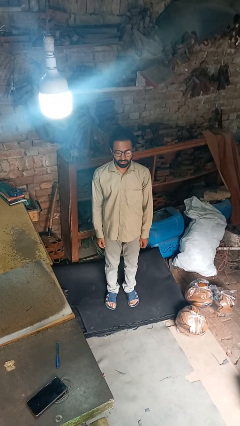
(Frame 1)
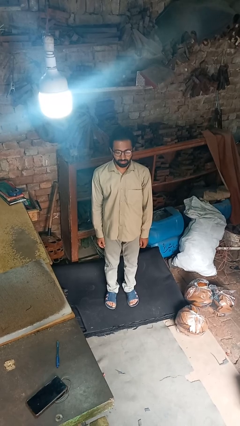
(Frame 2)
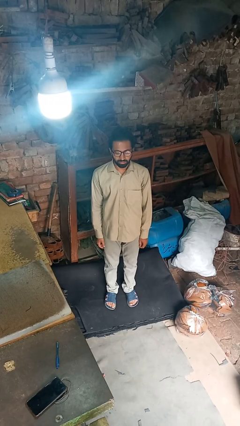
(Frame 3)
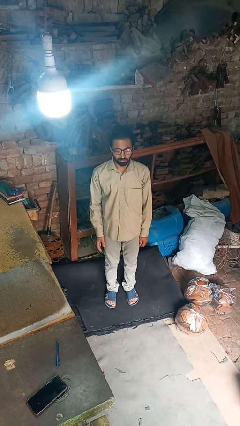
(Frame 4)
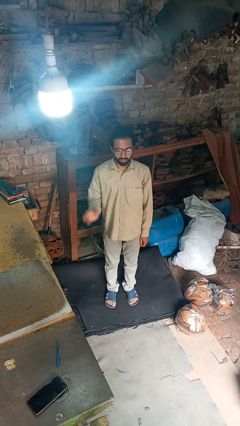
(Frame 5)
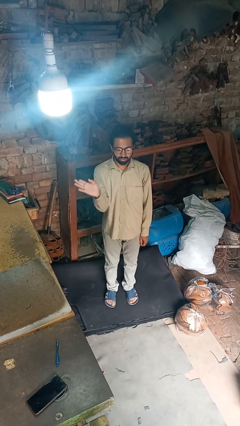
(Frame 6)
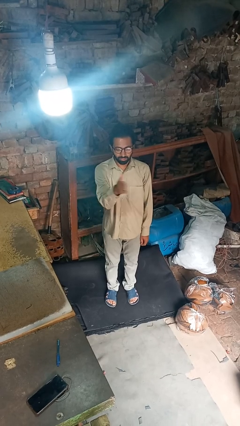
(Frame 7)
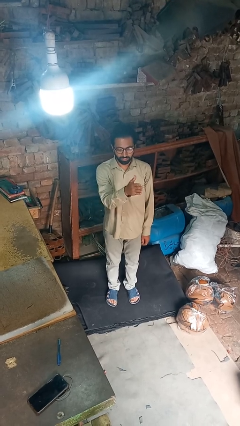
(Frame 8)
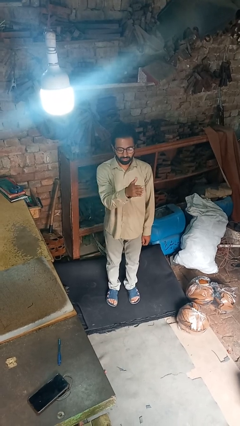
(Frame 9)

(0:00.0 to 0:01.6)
person punches

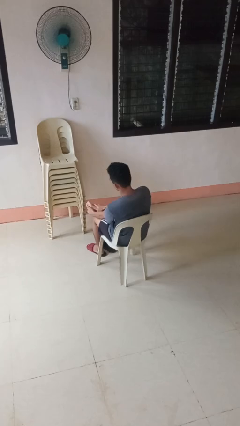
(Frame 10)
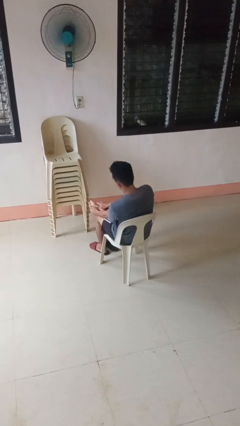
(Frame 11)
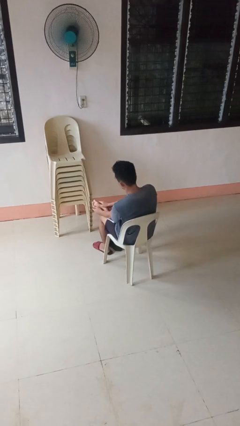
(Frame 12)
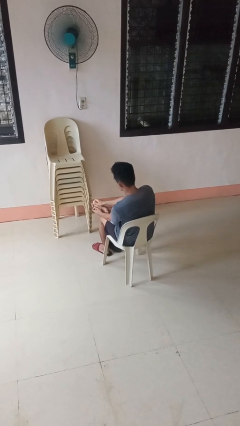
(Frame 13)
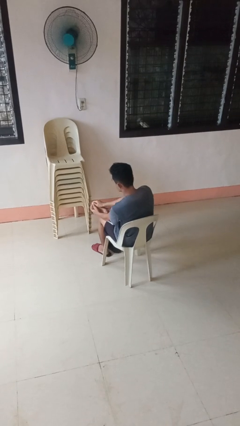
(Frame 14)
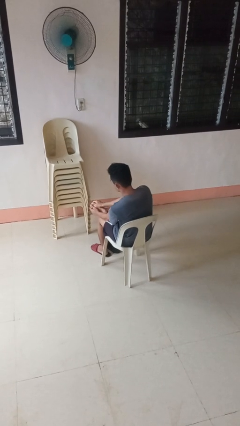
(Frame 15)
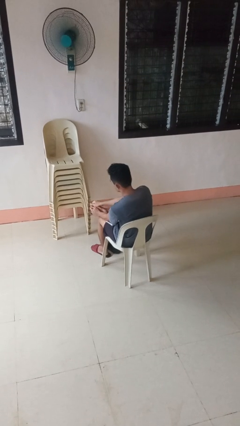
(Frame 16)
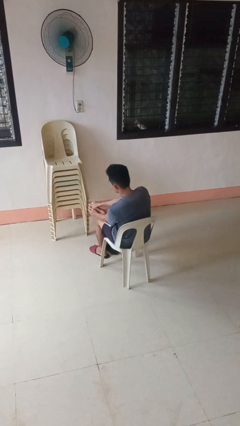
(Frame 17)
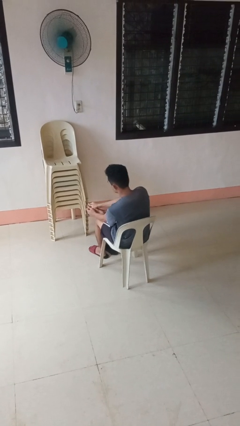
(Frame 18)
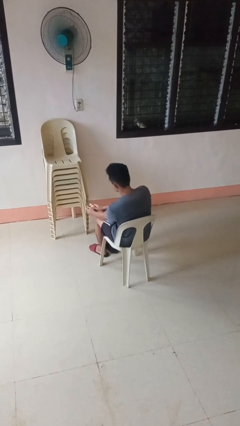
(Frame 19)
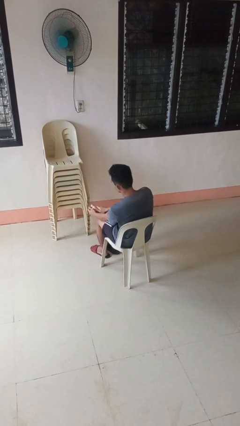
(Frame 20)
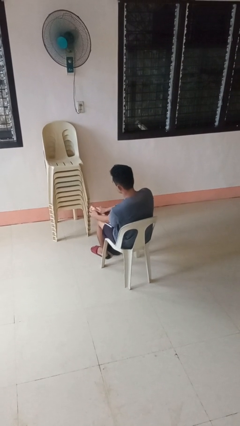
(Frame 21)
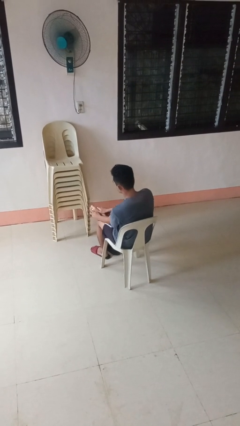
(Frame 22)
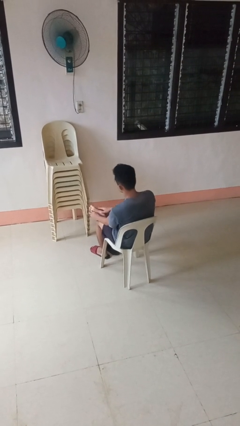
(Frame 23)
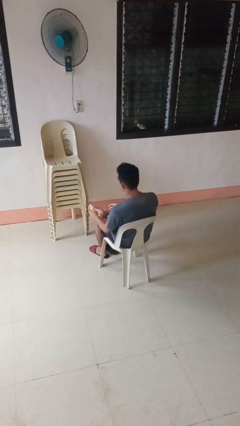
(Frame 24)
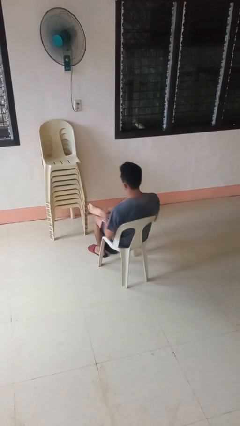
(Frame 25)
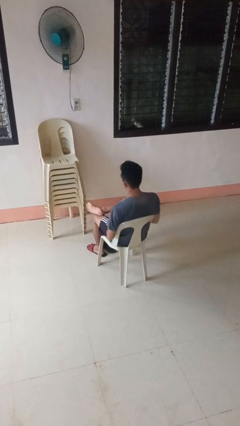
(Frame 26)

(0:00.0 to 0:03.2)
person rubs foot

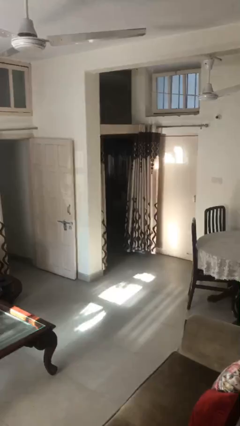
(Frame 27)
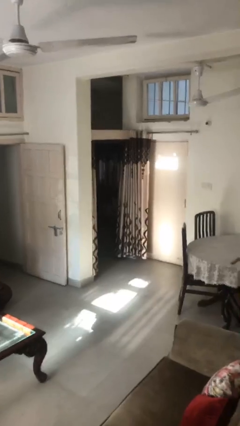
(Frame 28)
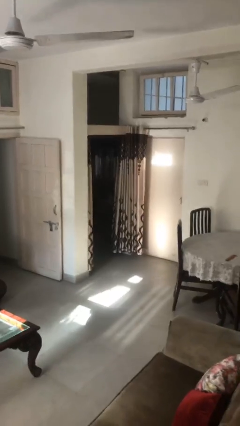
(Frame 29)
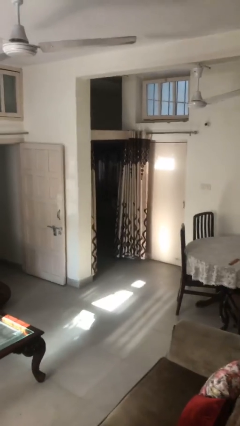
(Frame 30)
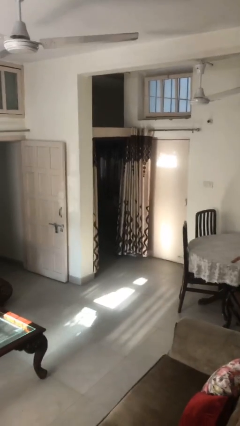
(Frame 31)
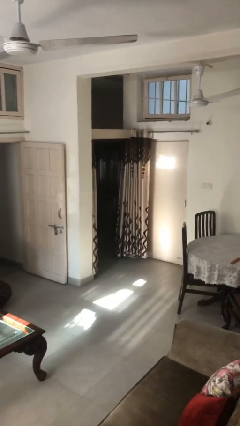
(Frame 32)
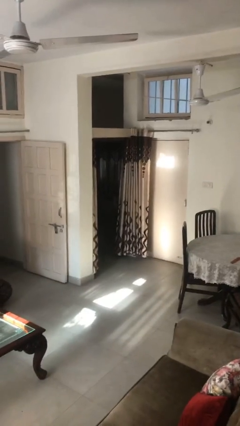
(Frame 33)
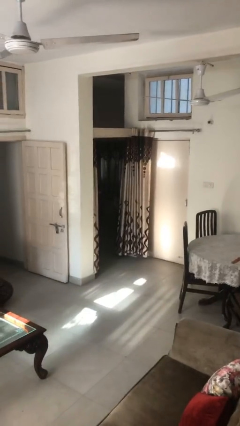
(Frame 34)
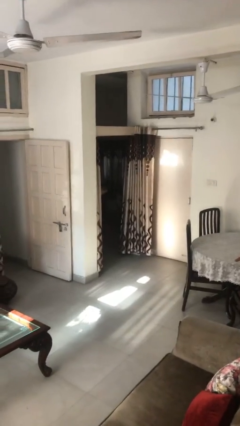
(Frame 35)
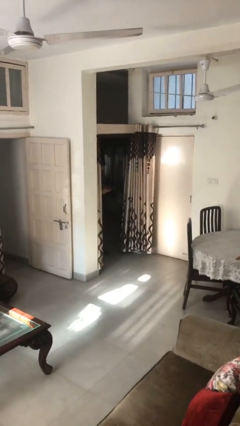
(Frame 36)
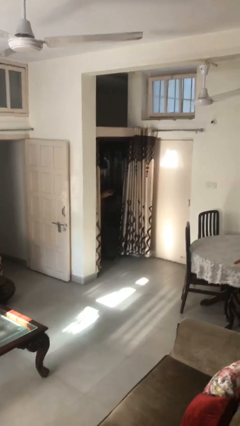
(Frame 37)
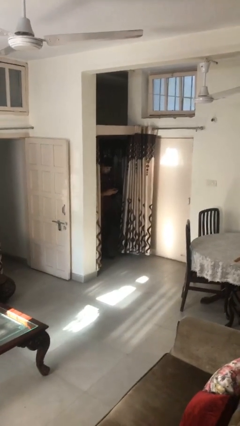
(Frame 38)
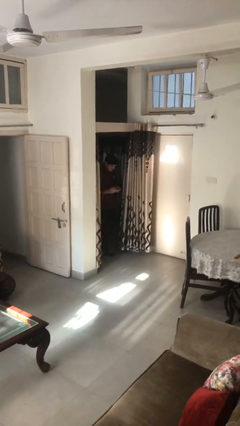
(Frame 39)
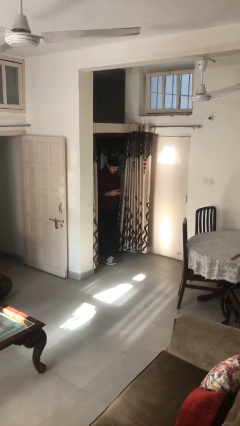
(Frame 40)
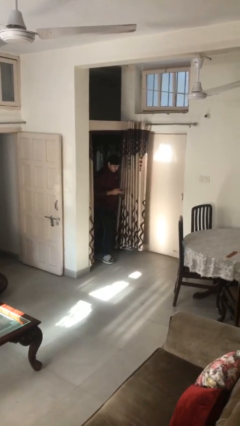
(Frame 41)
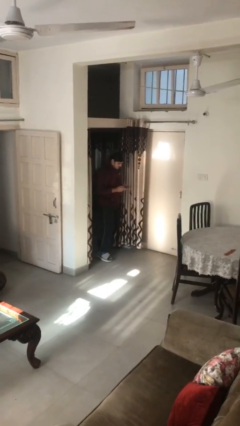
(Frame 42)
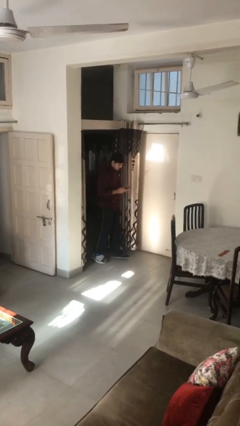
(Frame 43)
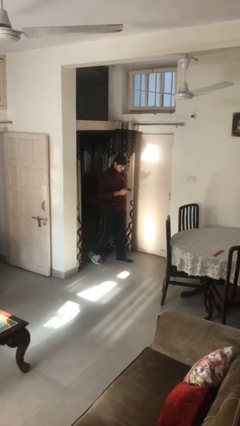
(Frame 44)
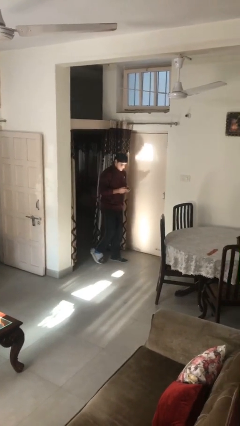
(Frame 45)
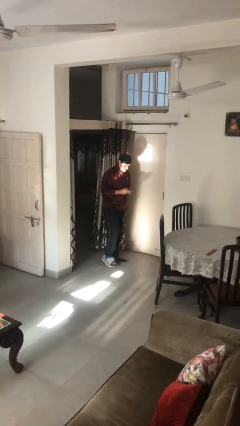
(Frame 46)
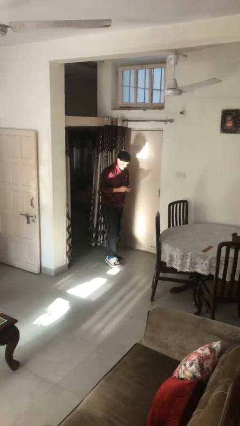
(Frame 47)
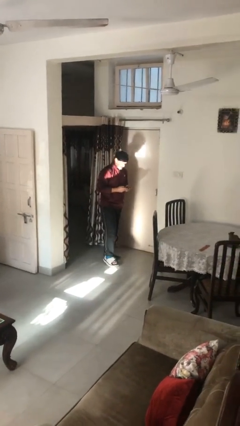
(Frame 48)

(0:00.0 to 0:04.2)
person enters scene through structure

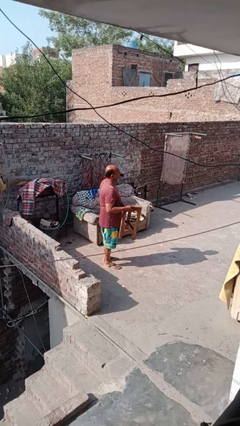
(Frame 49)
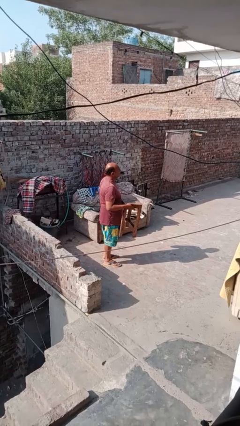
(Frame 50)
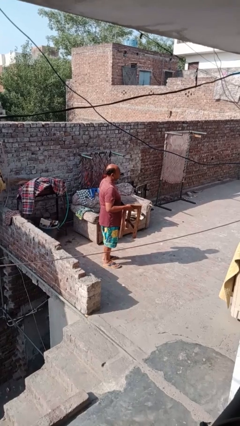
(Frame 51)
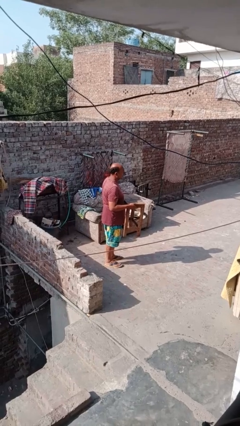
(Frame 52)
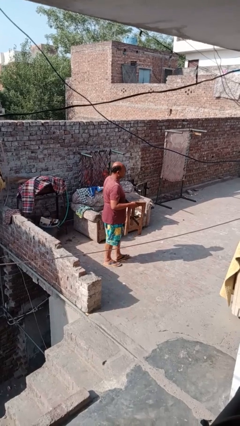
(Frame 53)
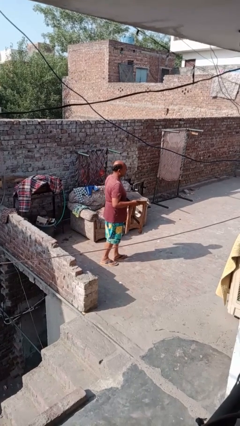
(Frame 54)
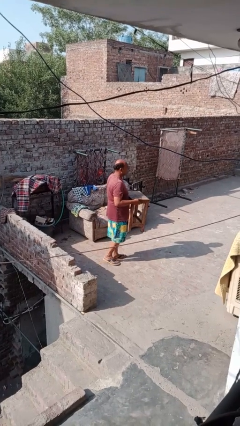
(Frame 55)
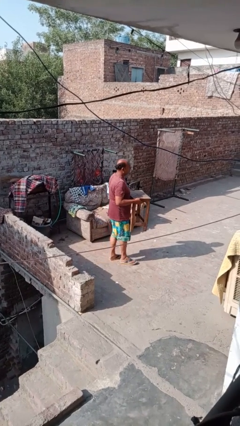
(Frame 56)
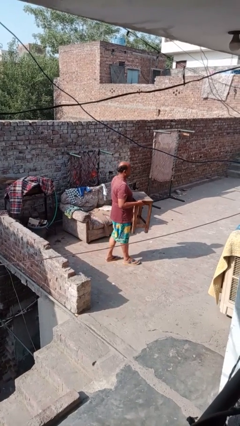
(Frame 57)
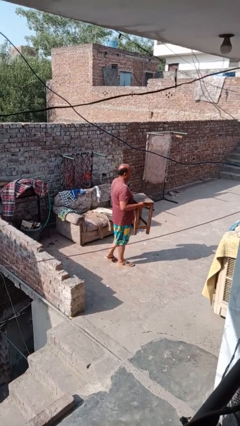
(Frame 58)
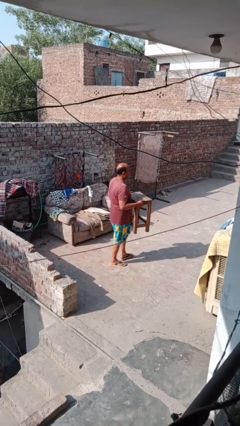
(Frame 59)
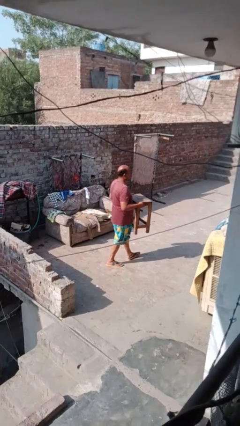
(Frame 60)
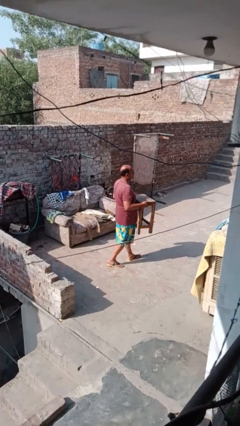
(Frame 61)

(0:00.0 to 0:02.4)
person carries furniture

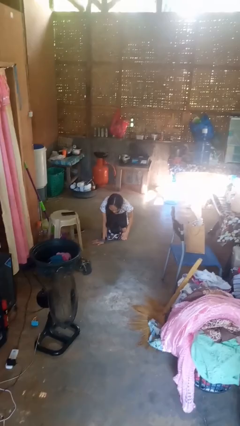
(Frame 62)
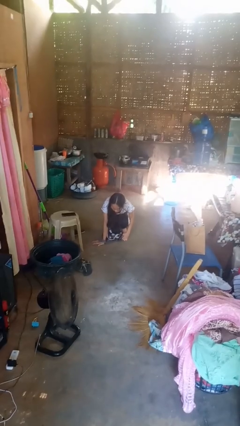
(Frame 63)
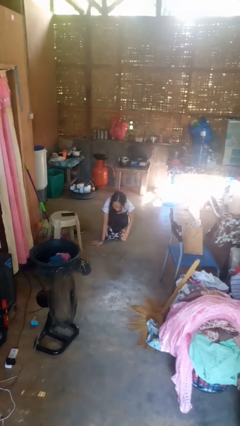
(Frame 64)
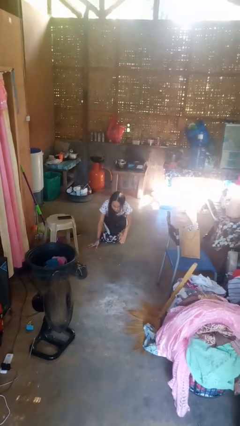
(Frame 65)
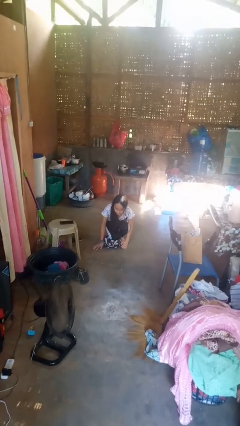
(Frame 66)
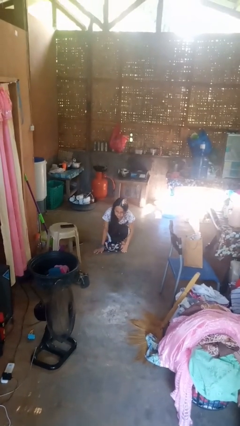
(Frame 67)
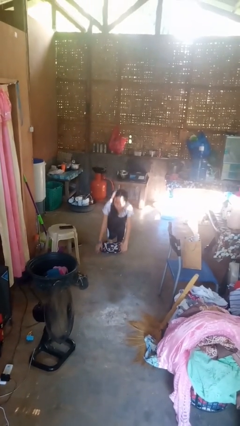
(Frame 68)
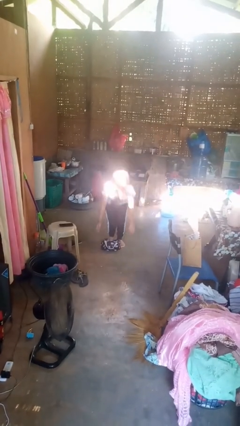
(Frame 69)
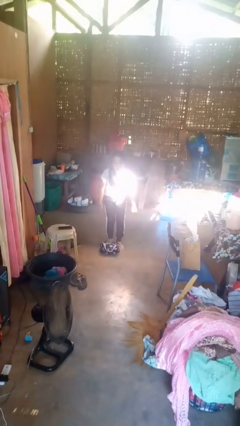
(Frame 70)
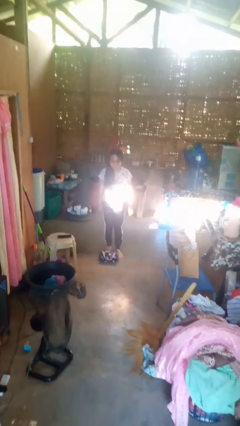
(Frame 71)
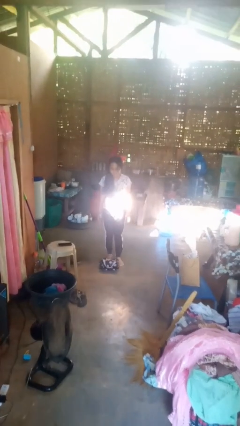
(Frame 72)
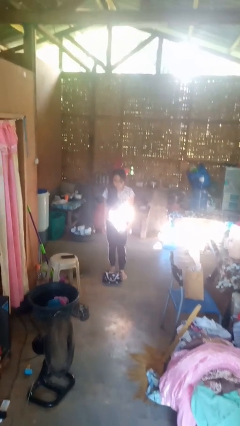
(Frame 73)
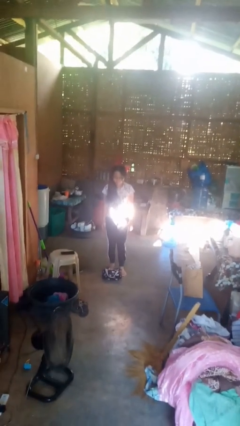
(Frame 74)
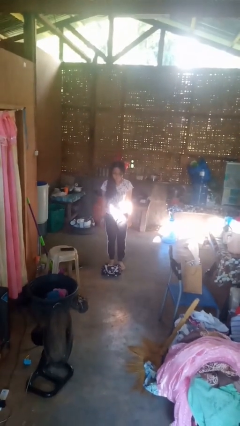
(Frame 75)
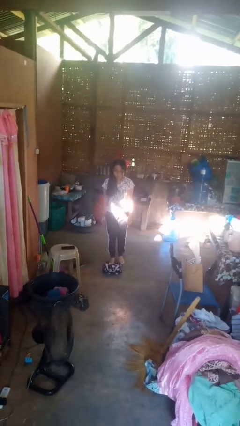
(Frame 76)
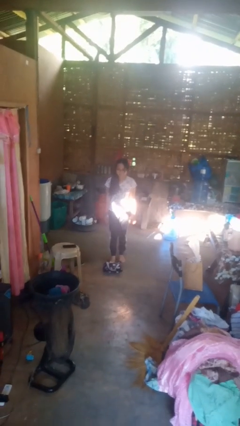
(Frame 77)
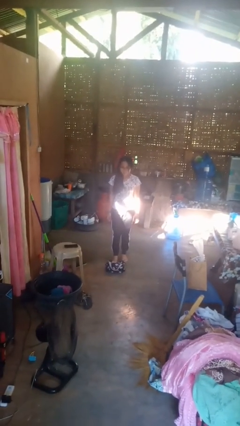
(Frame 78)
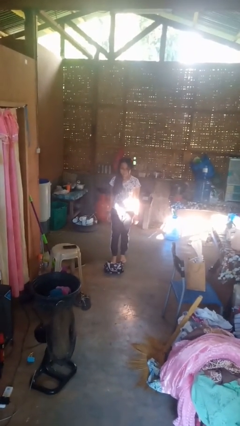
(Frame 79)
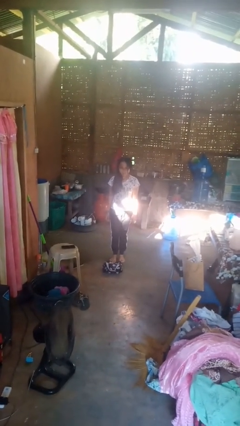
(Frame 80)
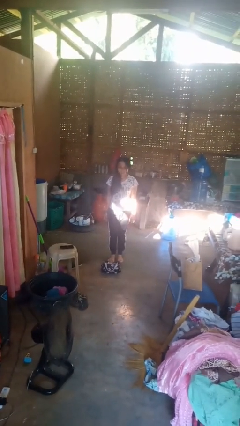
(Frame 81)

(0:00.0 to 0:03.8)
person stands up from floor

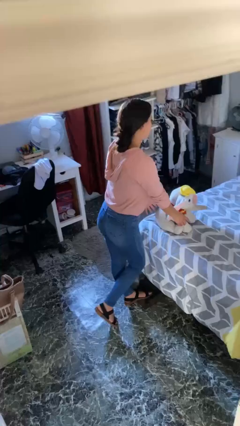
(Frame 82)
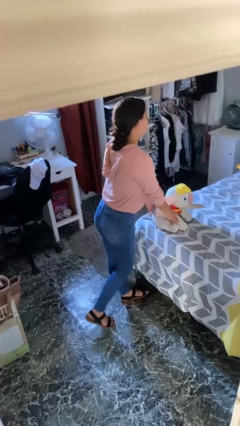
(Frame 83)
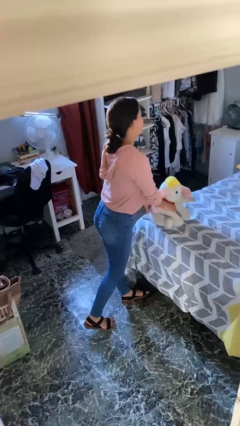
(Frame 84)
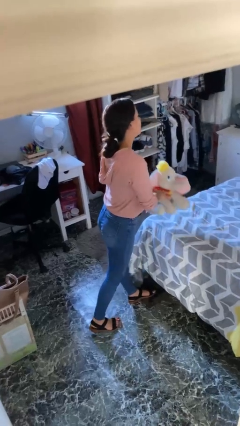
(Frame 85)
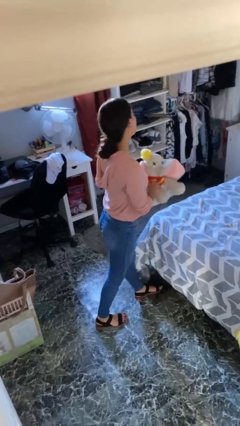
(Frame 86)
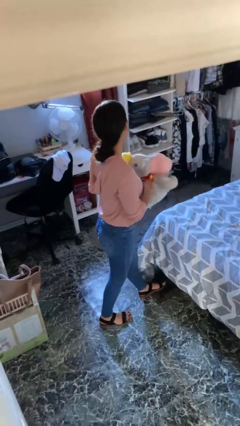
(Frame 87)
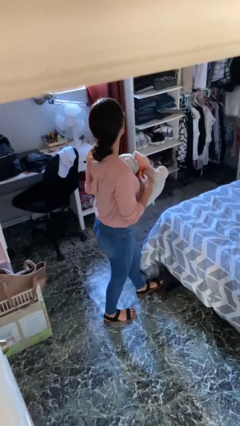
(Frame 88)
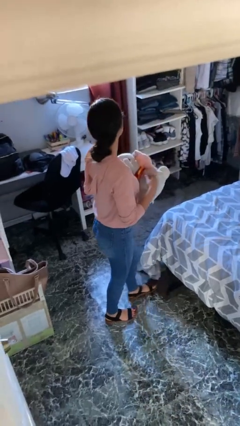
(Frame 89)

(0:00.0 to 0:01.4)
person picks up object from bed
